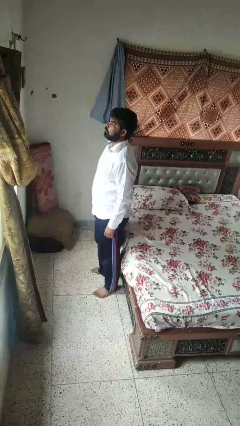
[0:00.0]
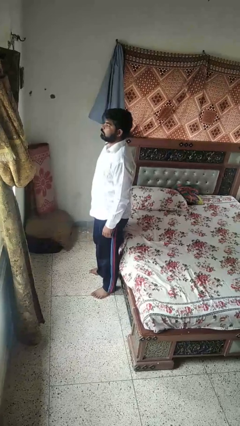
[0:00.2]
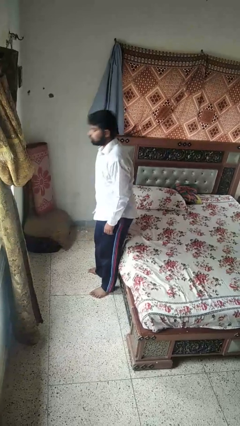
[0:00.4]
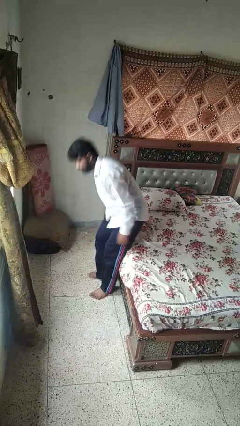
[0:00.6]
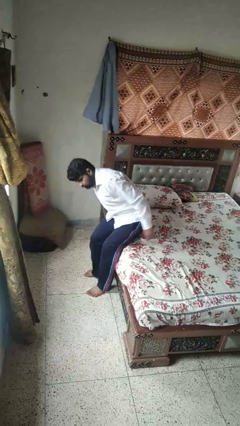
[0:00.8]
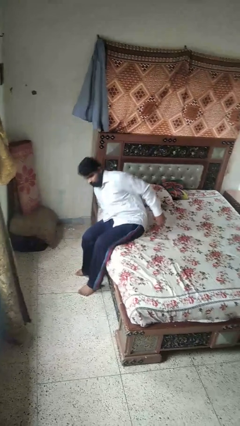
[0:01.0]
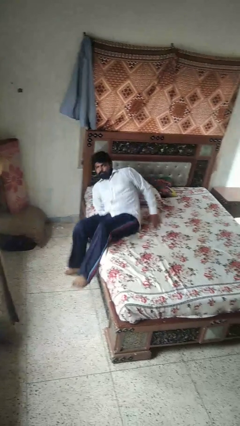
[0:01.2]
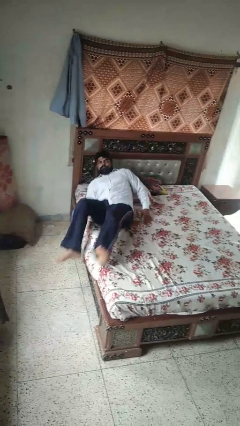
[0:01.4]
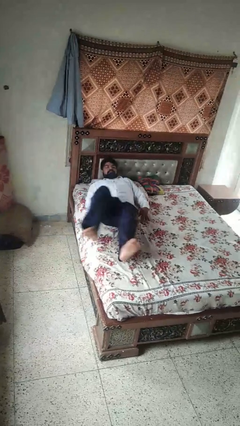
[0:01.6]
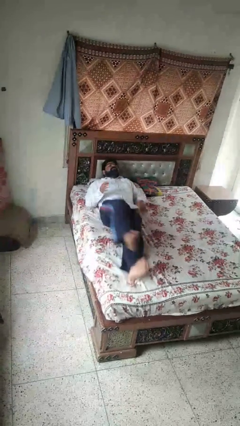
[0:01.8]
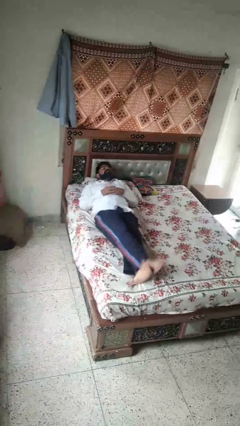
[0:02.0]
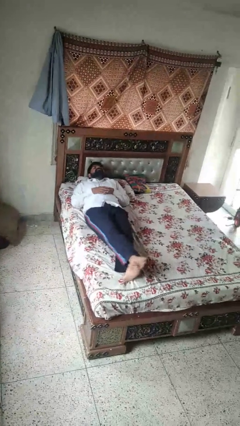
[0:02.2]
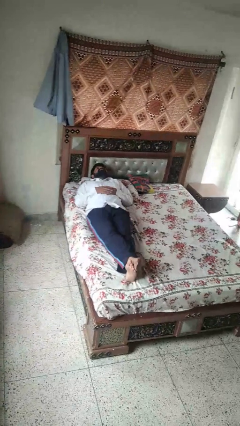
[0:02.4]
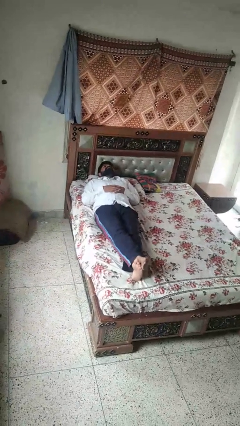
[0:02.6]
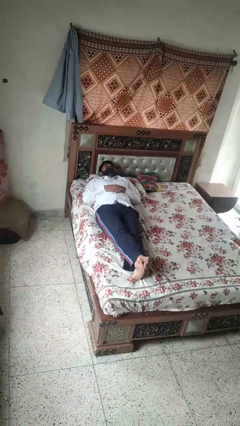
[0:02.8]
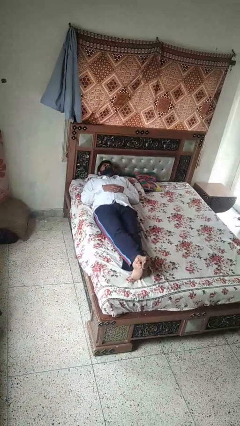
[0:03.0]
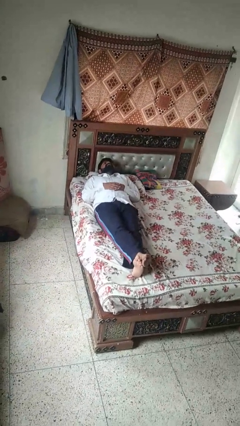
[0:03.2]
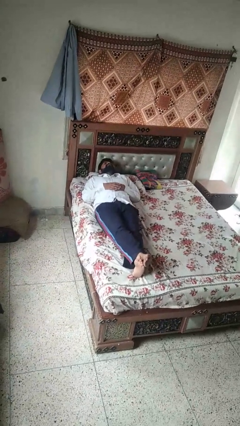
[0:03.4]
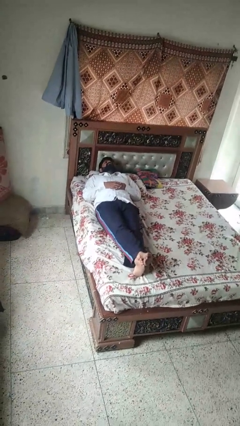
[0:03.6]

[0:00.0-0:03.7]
person lies down on bed

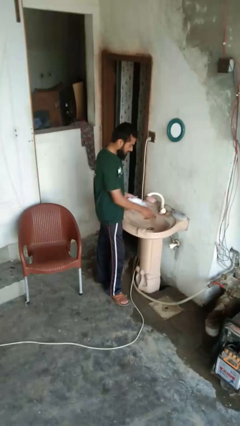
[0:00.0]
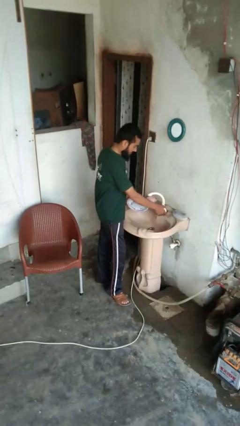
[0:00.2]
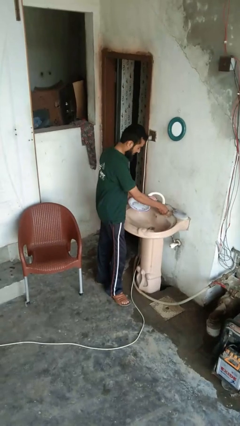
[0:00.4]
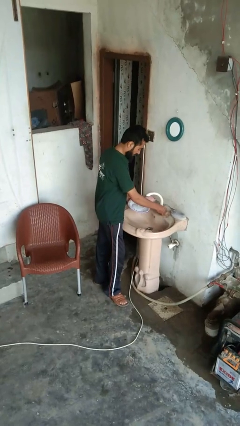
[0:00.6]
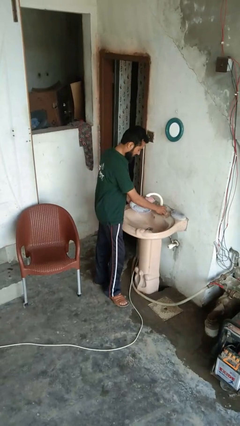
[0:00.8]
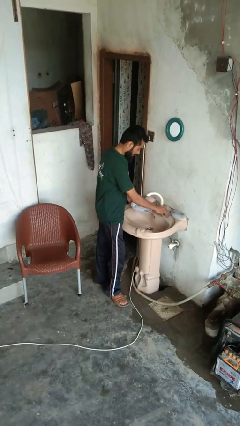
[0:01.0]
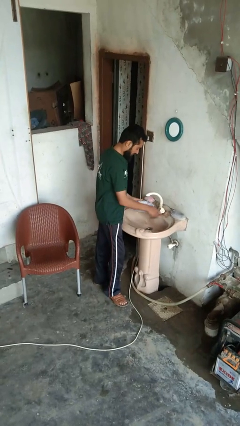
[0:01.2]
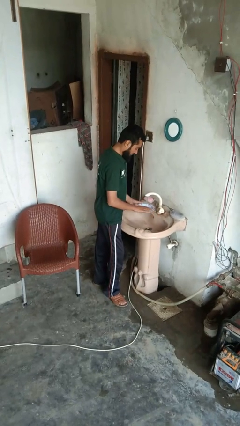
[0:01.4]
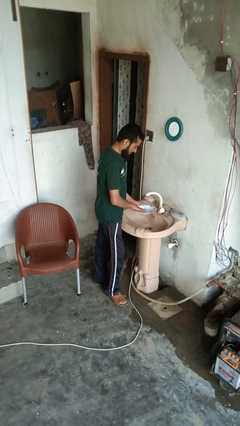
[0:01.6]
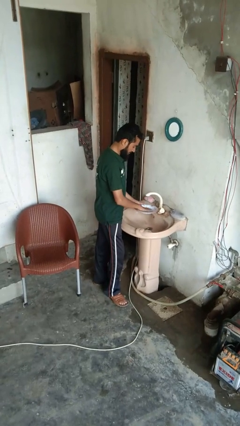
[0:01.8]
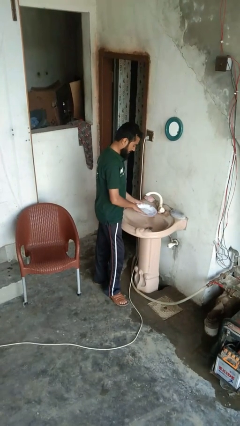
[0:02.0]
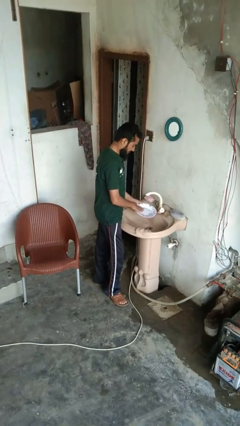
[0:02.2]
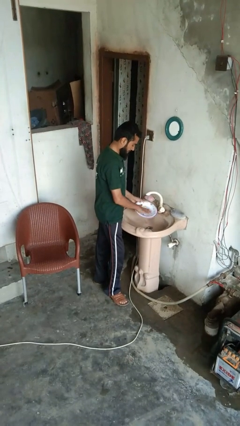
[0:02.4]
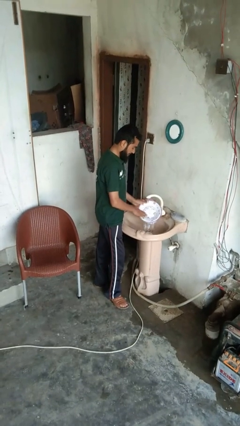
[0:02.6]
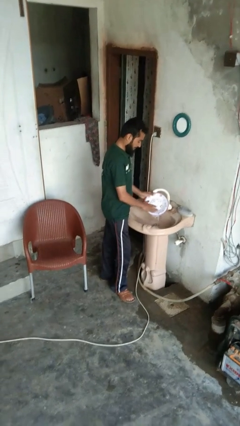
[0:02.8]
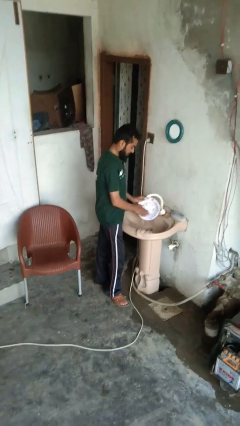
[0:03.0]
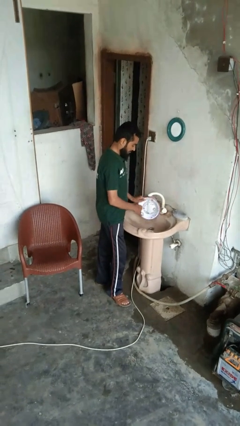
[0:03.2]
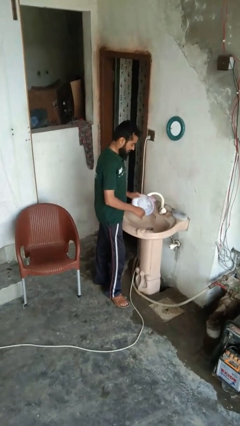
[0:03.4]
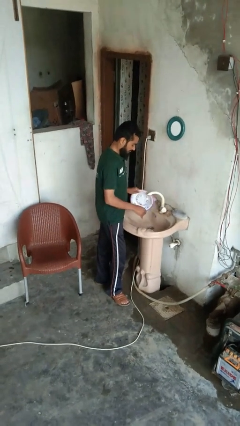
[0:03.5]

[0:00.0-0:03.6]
person washes dish

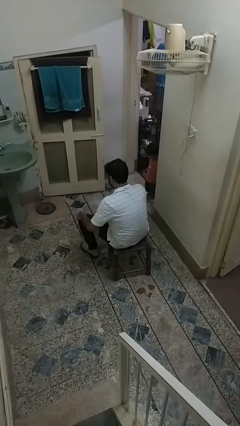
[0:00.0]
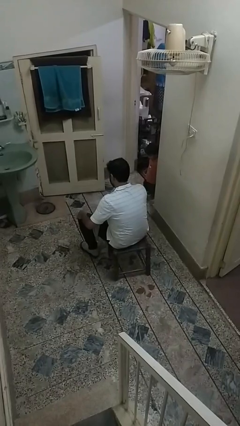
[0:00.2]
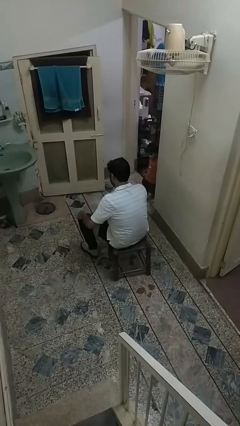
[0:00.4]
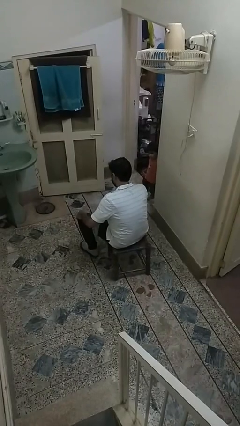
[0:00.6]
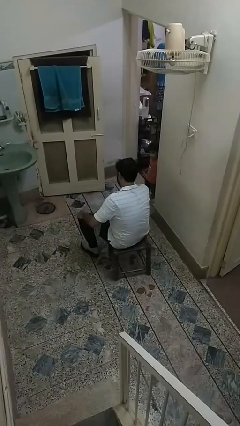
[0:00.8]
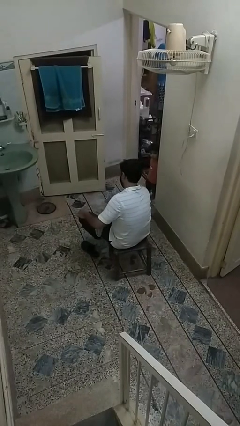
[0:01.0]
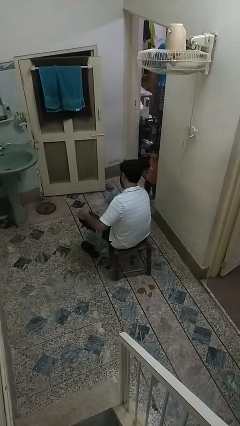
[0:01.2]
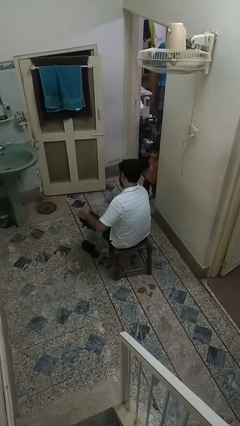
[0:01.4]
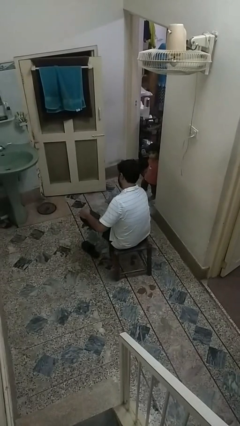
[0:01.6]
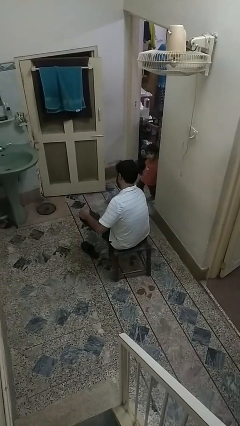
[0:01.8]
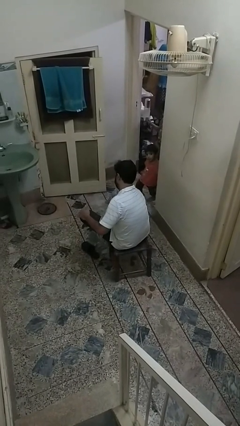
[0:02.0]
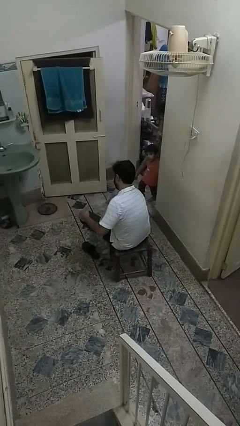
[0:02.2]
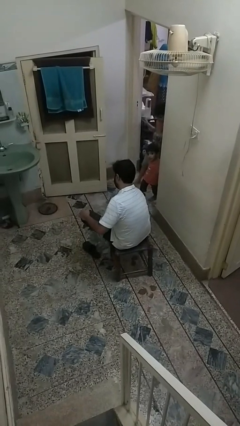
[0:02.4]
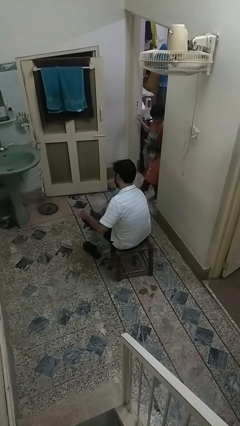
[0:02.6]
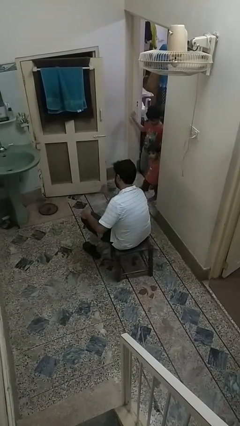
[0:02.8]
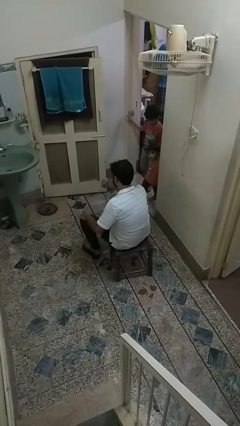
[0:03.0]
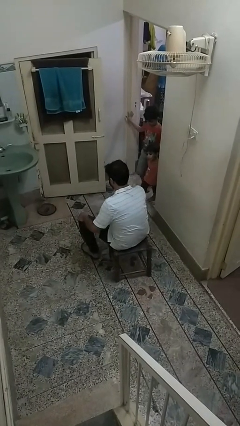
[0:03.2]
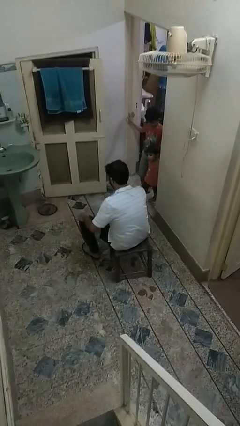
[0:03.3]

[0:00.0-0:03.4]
person takes off socks

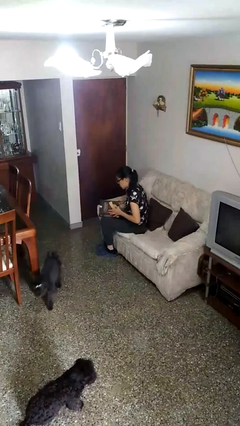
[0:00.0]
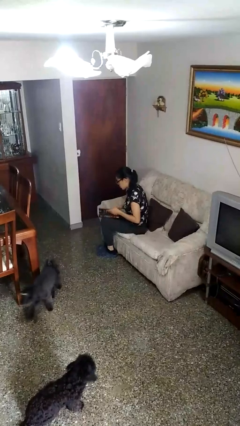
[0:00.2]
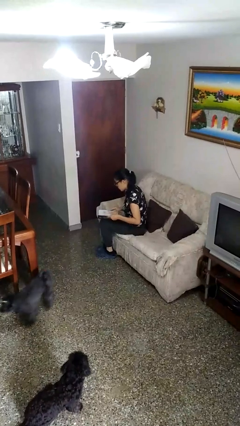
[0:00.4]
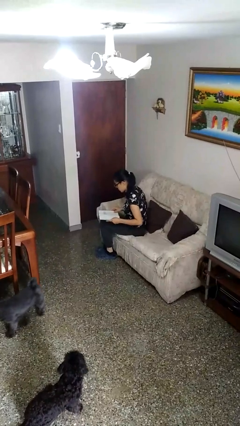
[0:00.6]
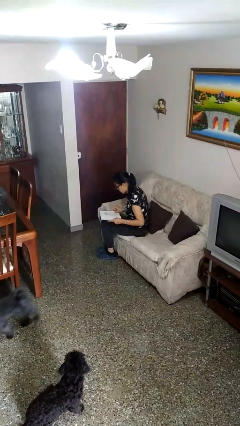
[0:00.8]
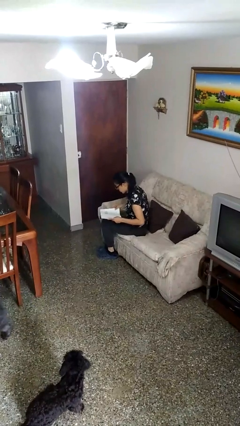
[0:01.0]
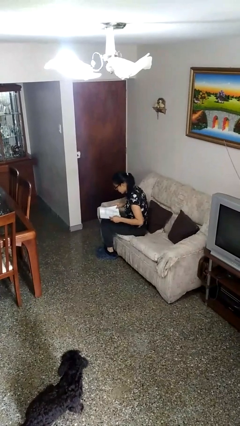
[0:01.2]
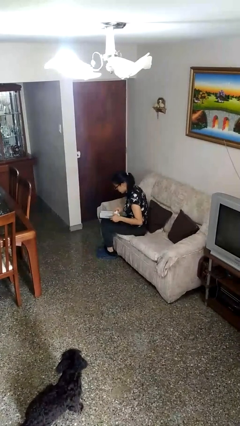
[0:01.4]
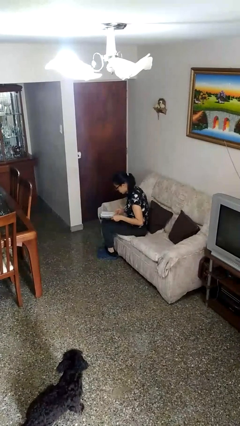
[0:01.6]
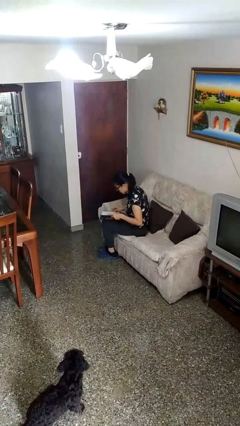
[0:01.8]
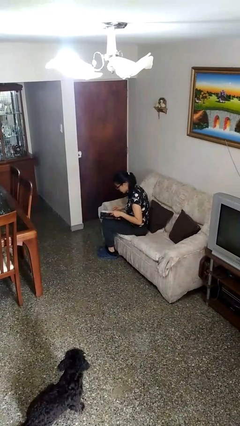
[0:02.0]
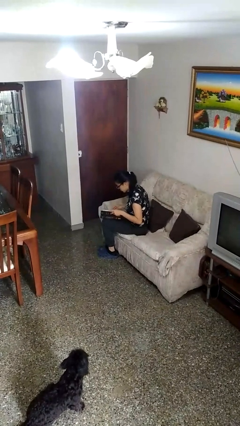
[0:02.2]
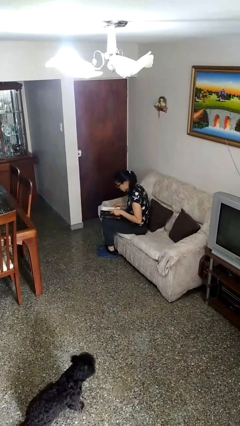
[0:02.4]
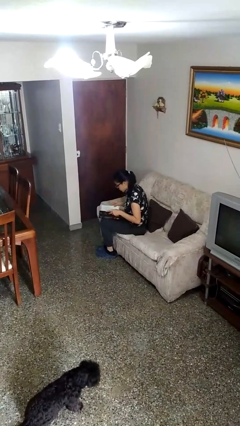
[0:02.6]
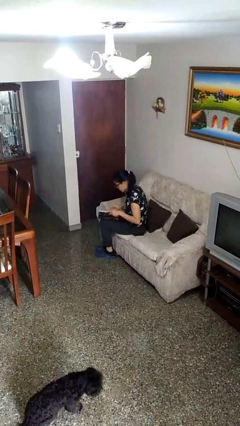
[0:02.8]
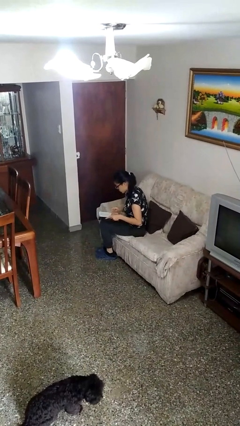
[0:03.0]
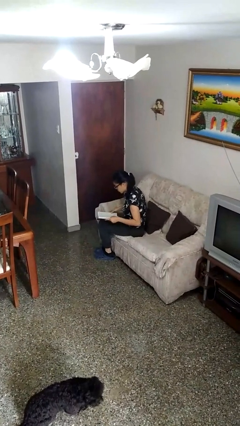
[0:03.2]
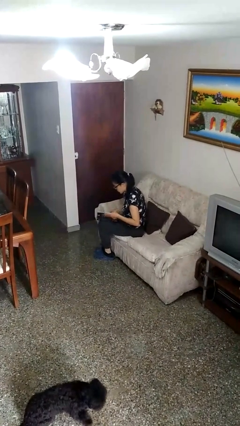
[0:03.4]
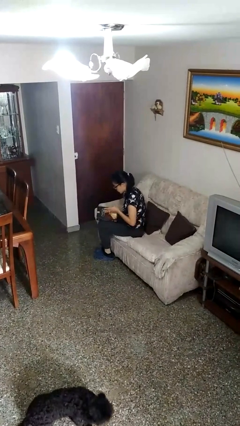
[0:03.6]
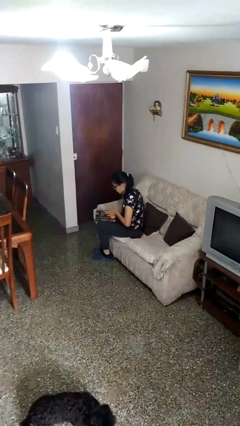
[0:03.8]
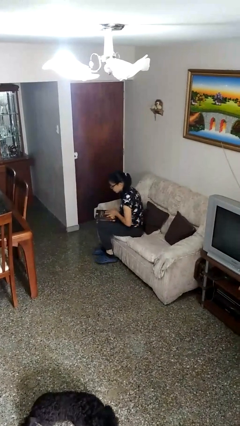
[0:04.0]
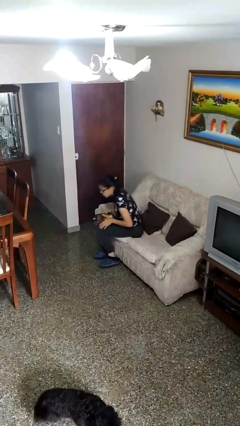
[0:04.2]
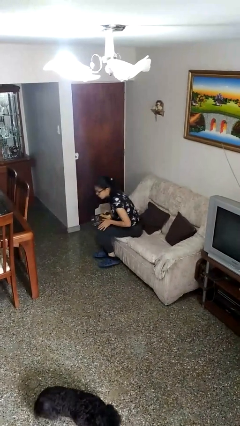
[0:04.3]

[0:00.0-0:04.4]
person reads book

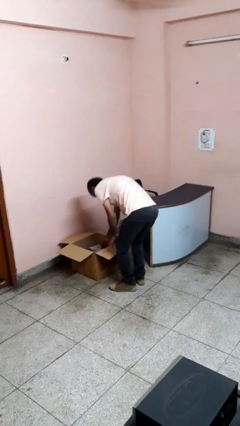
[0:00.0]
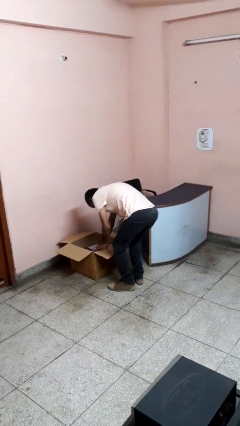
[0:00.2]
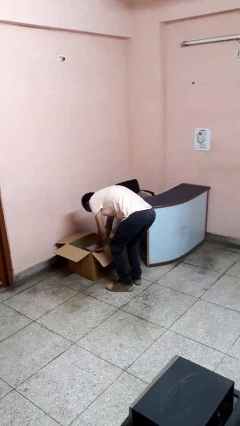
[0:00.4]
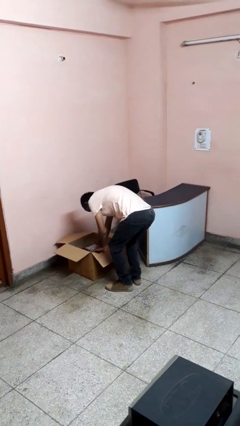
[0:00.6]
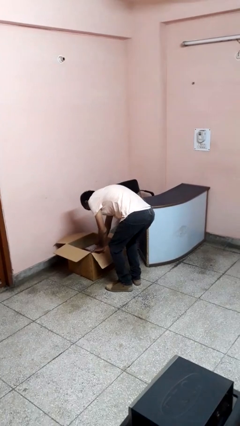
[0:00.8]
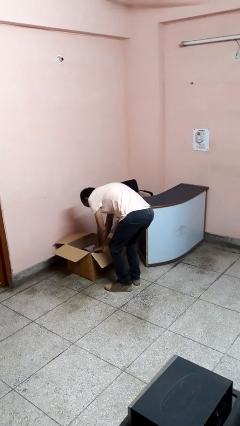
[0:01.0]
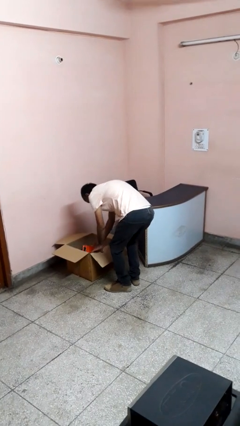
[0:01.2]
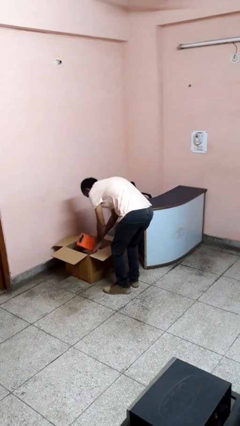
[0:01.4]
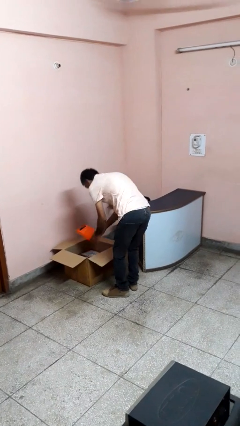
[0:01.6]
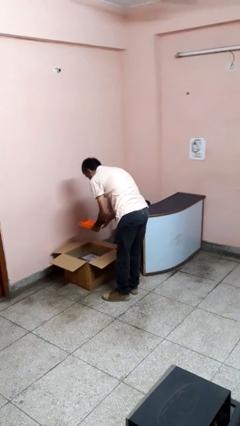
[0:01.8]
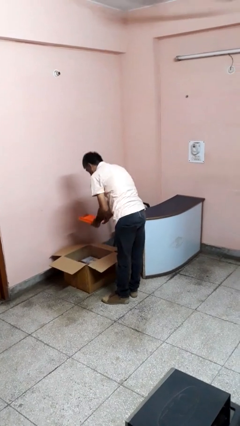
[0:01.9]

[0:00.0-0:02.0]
person takes object from box

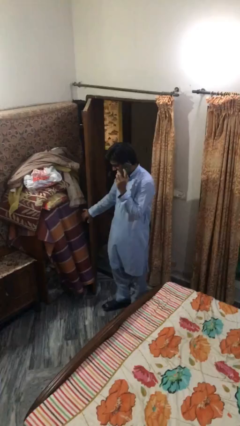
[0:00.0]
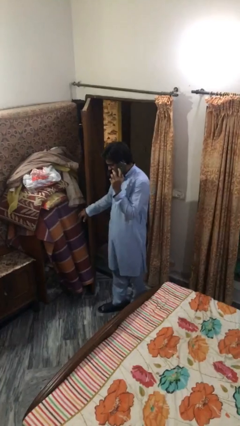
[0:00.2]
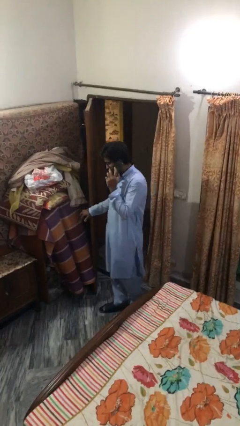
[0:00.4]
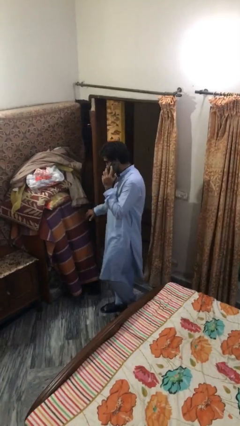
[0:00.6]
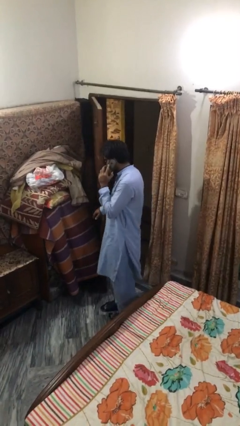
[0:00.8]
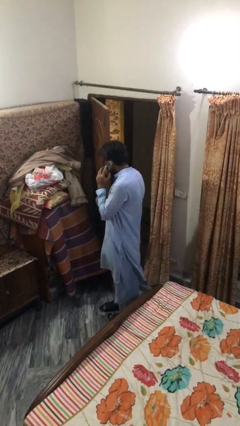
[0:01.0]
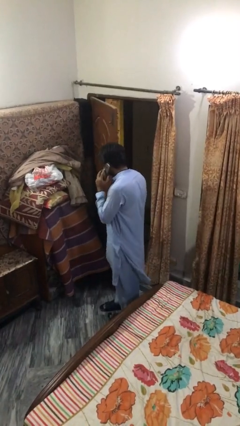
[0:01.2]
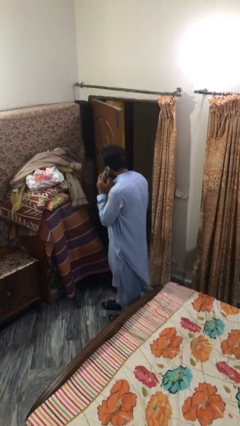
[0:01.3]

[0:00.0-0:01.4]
person closes facility door
